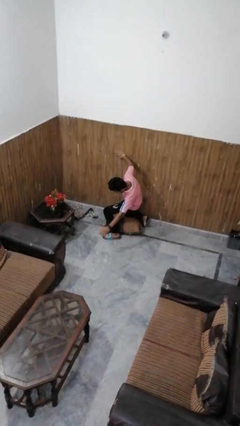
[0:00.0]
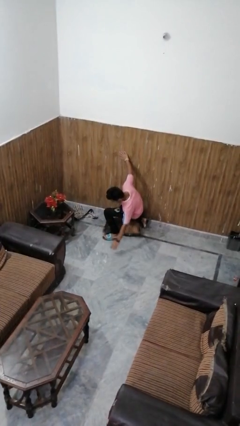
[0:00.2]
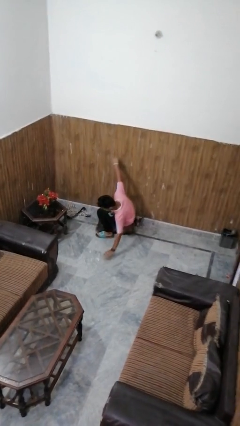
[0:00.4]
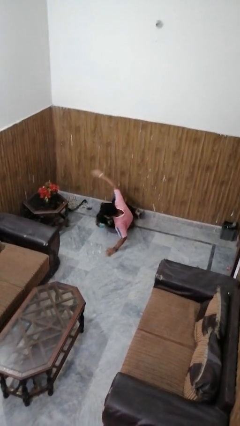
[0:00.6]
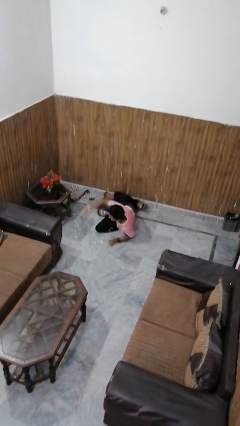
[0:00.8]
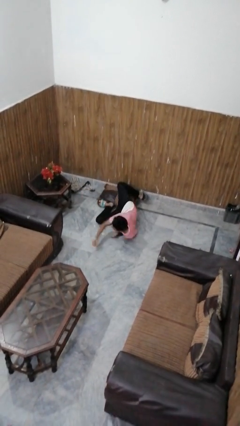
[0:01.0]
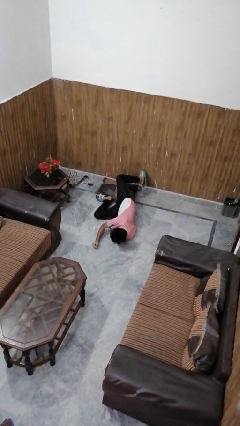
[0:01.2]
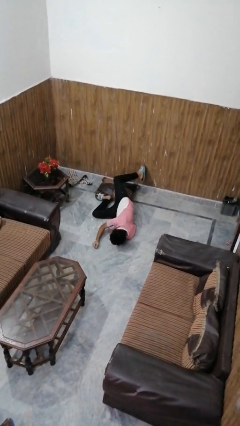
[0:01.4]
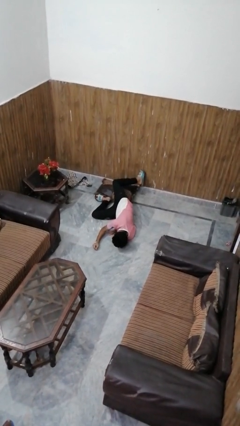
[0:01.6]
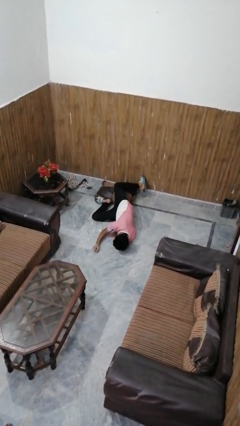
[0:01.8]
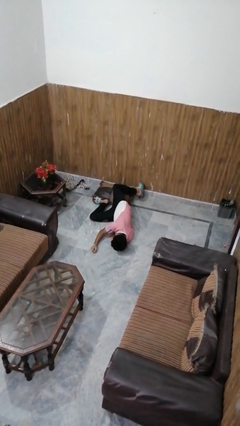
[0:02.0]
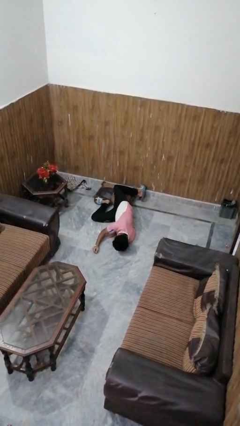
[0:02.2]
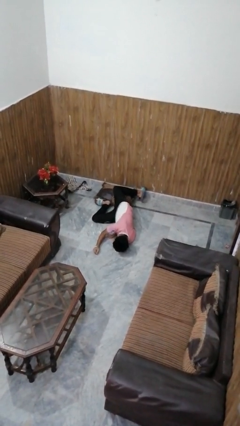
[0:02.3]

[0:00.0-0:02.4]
person lies down on floor

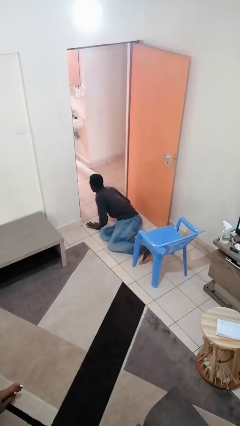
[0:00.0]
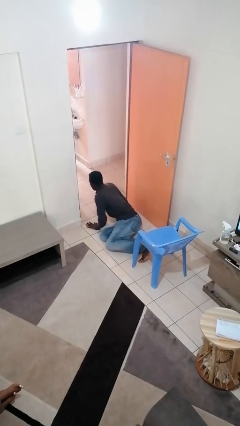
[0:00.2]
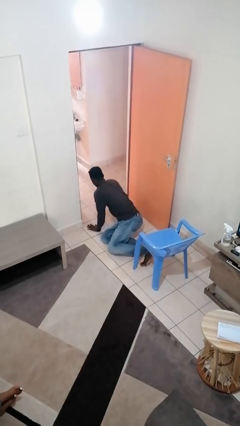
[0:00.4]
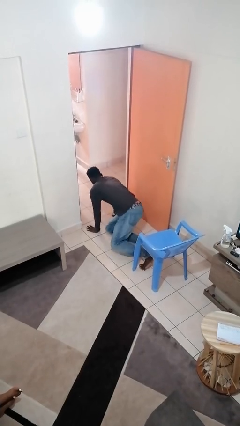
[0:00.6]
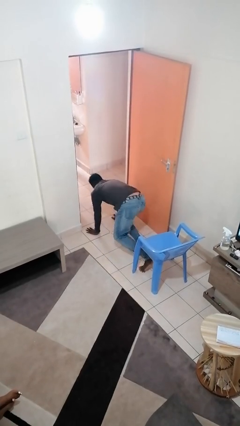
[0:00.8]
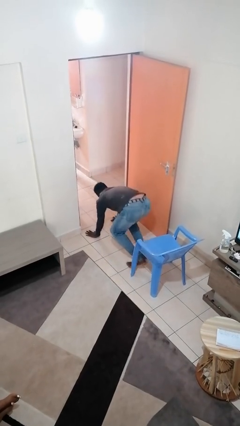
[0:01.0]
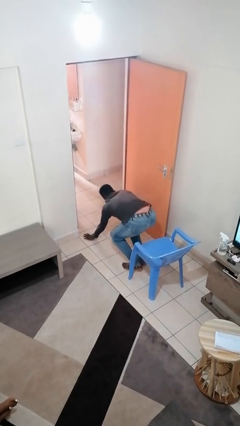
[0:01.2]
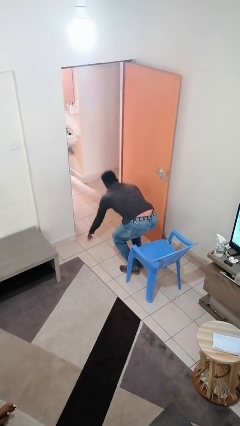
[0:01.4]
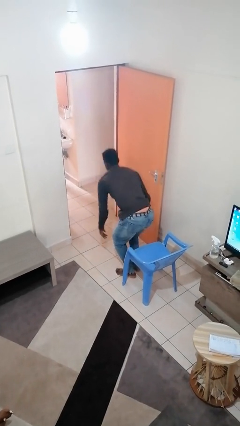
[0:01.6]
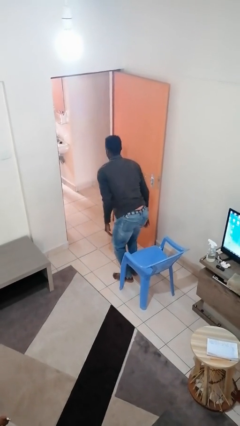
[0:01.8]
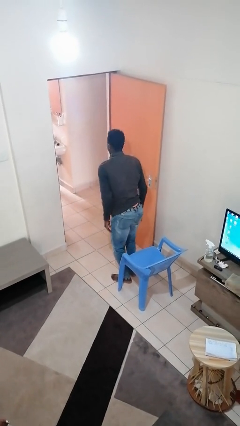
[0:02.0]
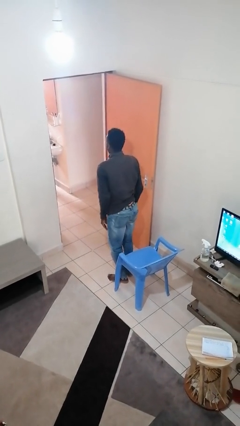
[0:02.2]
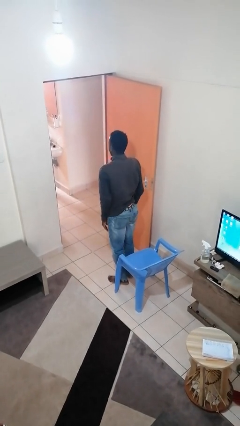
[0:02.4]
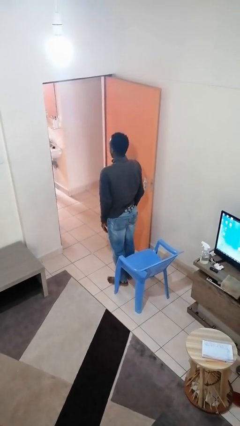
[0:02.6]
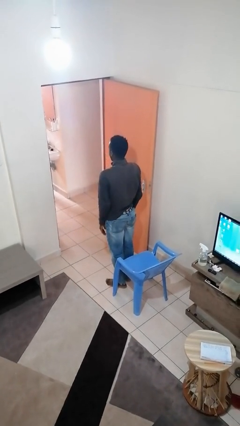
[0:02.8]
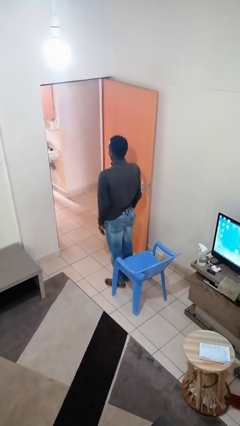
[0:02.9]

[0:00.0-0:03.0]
person stands up from floor

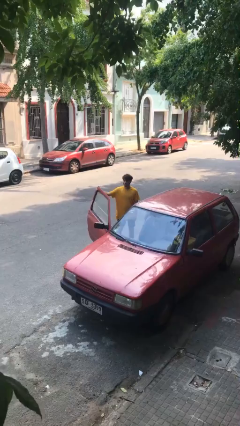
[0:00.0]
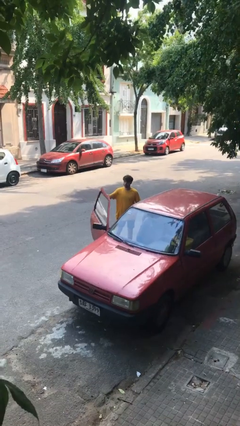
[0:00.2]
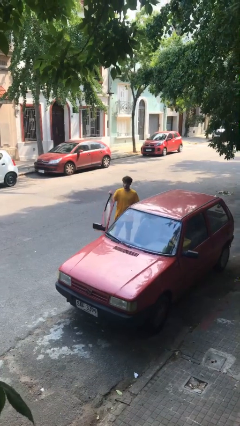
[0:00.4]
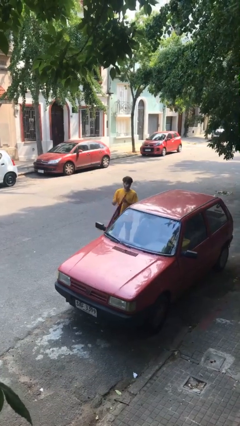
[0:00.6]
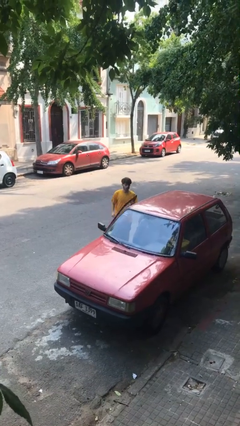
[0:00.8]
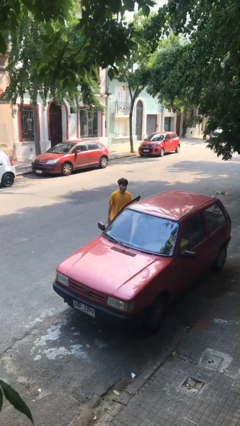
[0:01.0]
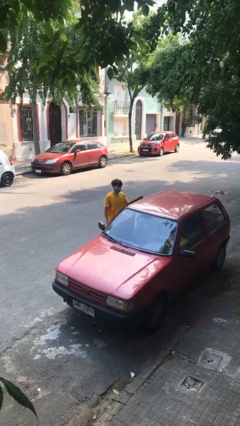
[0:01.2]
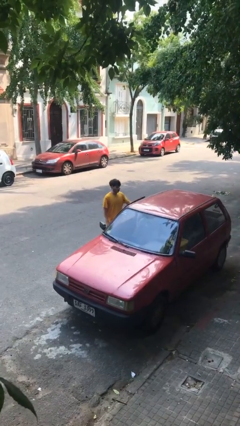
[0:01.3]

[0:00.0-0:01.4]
person closes car door

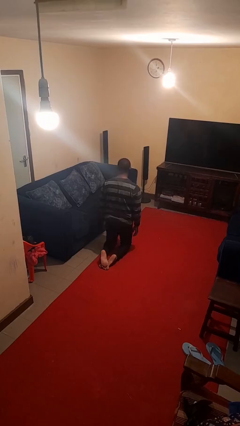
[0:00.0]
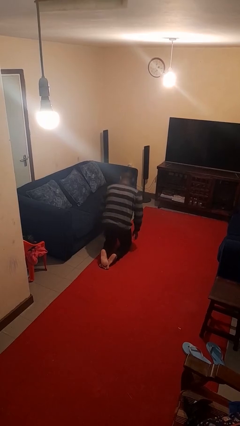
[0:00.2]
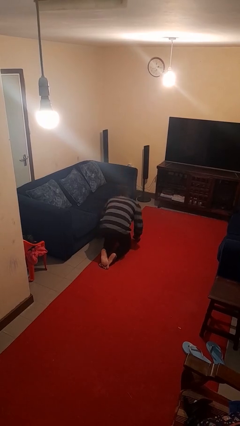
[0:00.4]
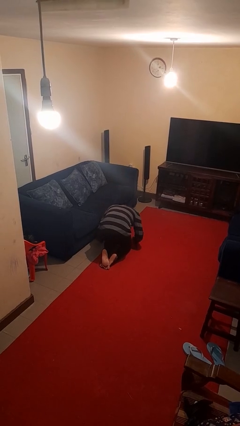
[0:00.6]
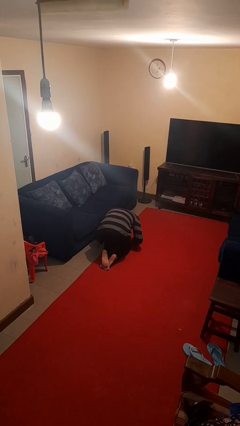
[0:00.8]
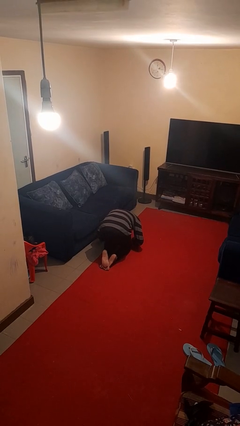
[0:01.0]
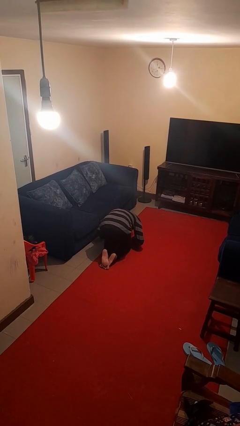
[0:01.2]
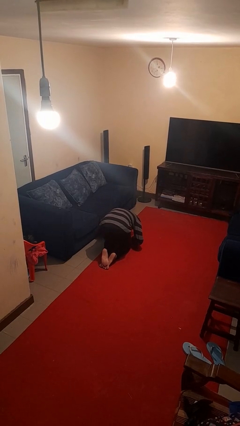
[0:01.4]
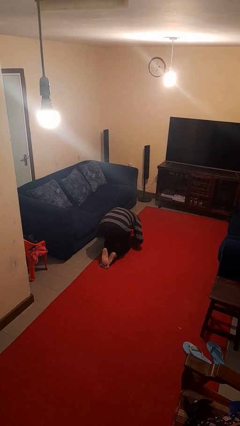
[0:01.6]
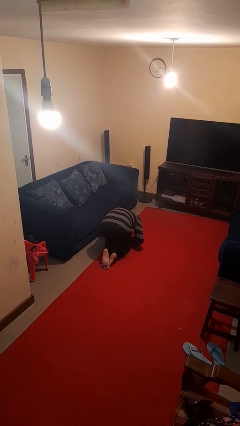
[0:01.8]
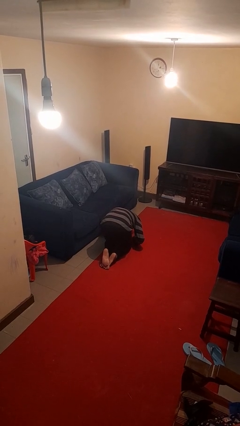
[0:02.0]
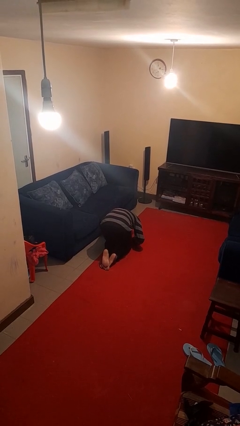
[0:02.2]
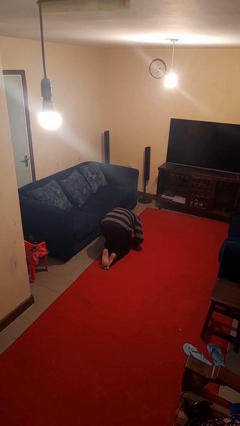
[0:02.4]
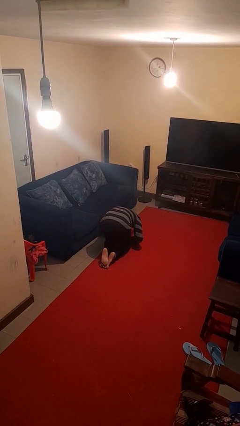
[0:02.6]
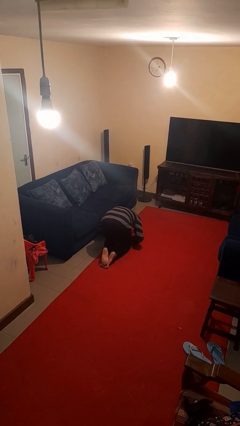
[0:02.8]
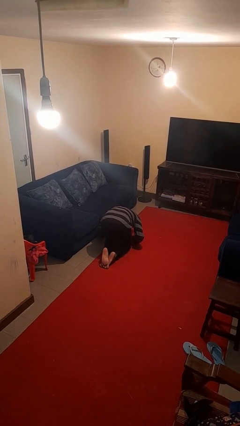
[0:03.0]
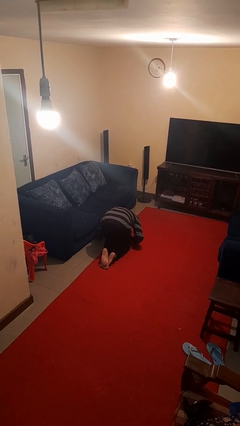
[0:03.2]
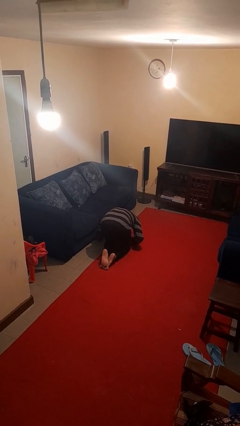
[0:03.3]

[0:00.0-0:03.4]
person searches under couch

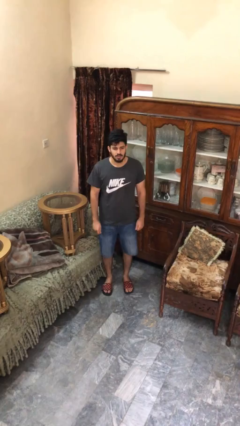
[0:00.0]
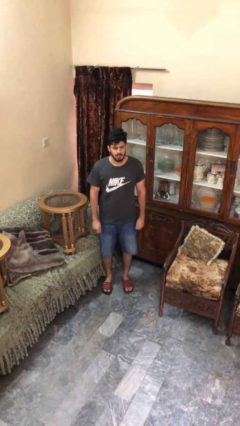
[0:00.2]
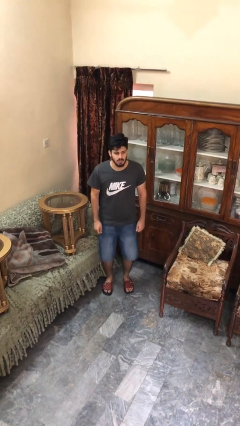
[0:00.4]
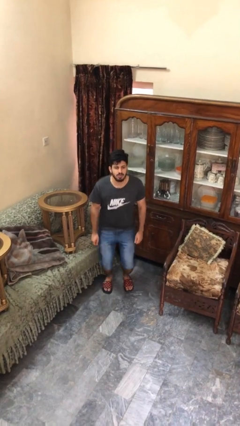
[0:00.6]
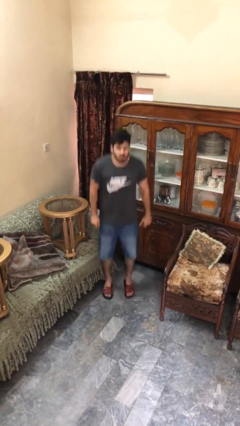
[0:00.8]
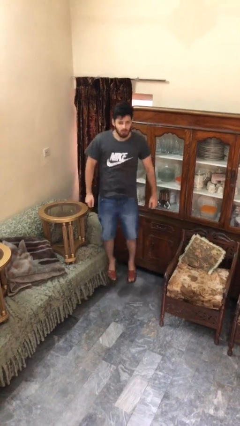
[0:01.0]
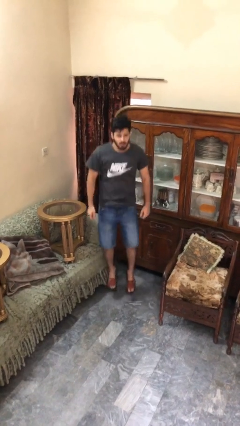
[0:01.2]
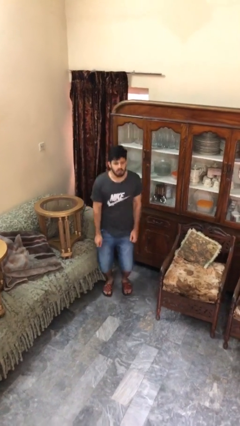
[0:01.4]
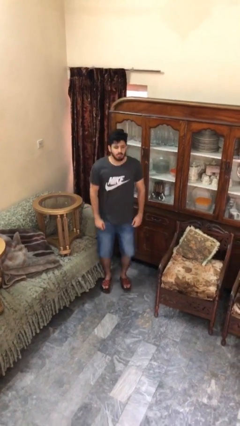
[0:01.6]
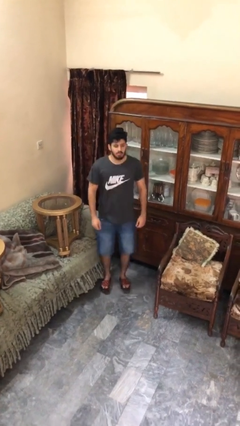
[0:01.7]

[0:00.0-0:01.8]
person jumps

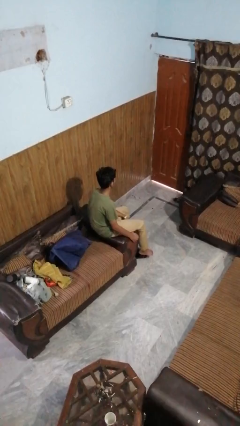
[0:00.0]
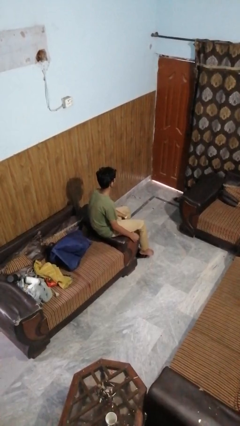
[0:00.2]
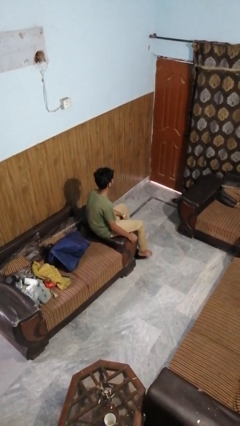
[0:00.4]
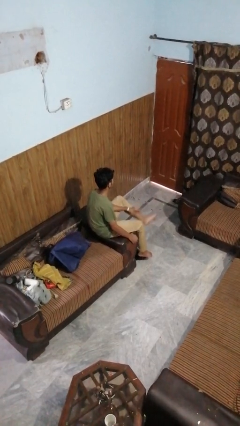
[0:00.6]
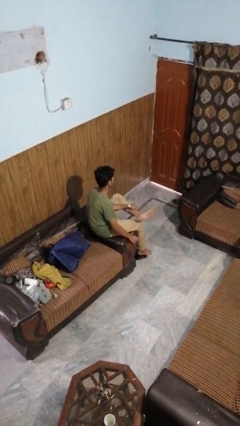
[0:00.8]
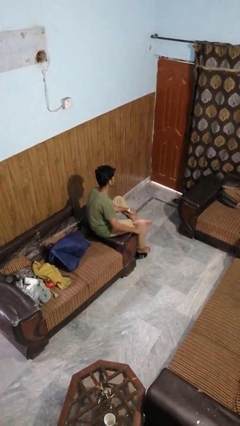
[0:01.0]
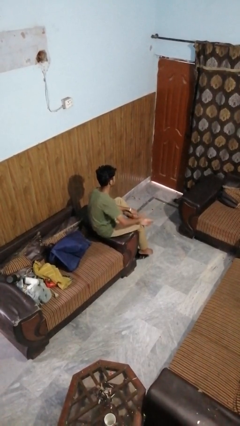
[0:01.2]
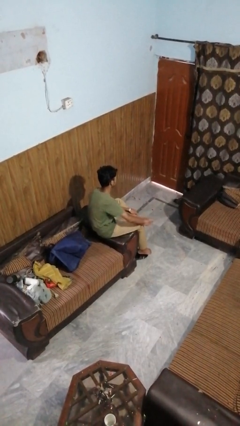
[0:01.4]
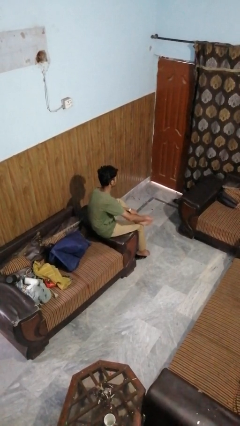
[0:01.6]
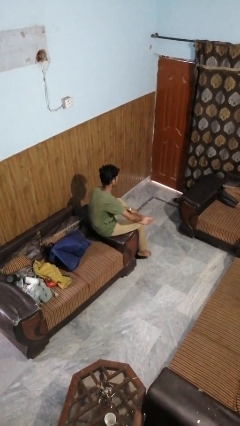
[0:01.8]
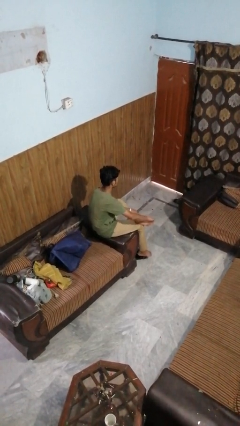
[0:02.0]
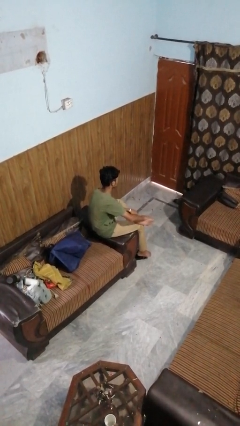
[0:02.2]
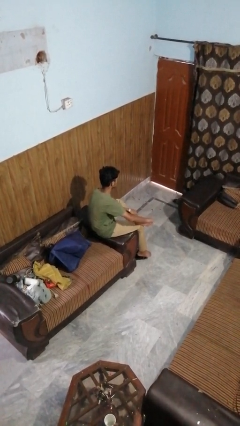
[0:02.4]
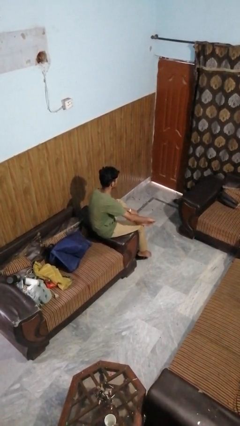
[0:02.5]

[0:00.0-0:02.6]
person rubs foot

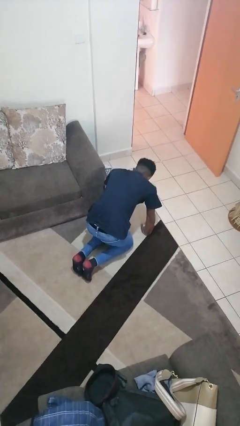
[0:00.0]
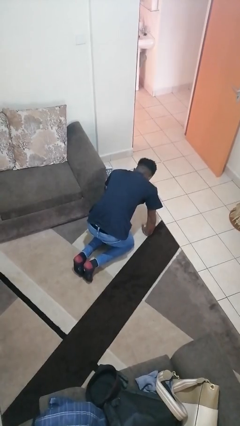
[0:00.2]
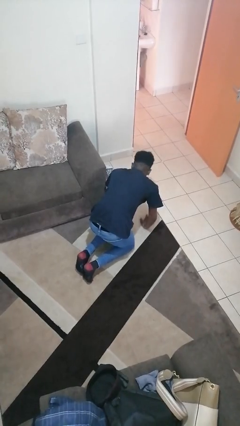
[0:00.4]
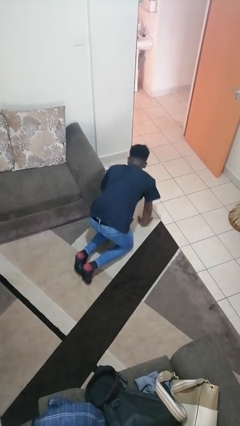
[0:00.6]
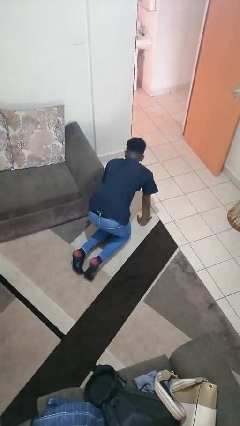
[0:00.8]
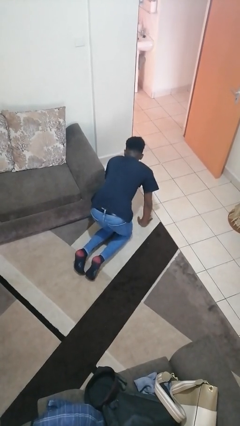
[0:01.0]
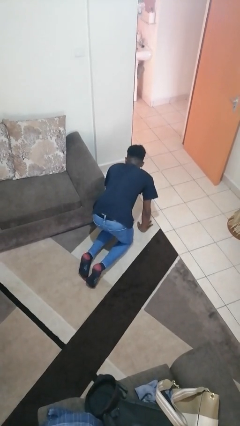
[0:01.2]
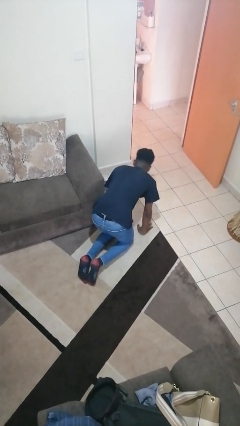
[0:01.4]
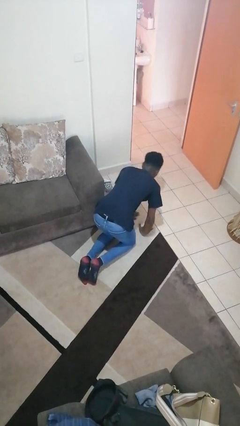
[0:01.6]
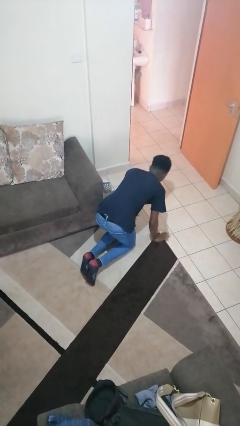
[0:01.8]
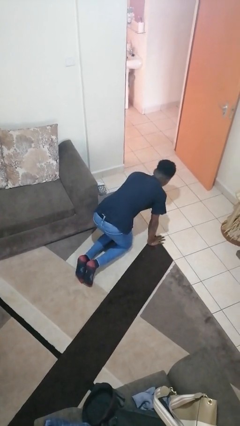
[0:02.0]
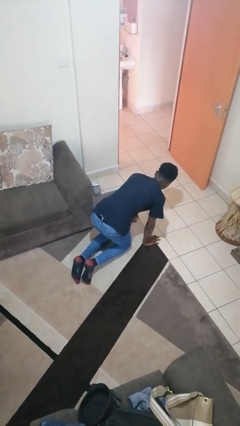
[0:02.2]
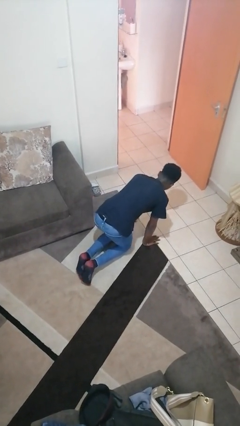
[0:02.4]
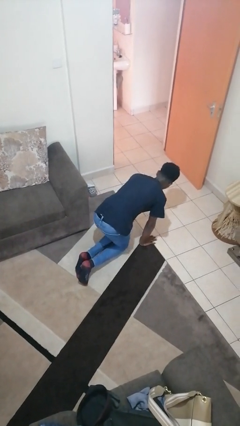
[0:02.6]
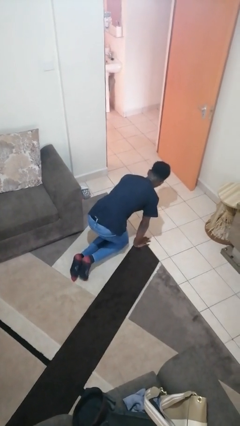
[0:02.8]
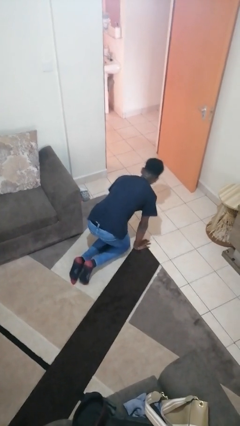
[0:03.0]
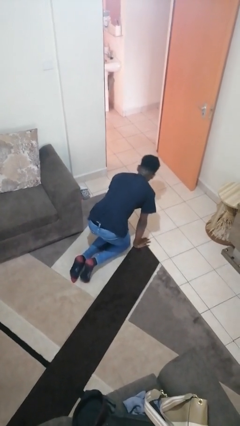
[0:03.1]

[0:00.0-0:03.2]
person crawls
